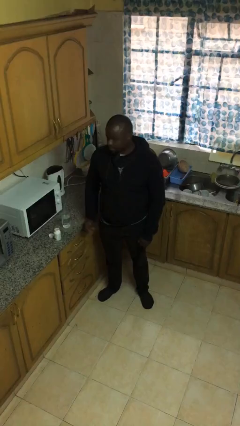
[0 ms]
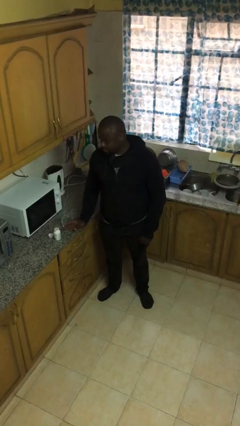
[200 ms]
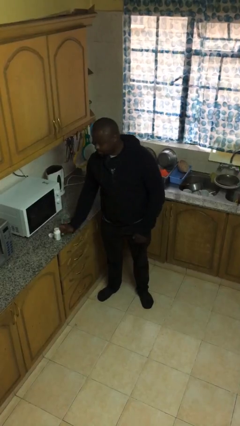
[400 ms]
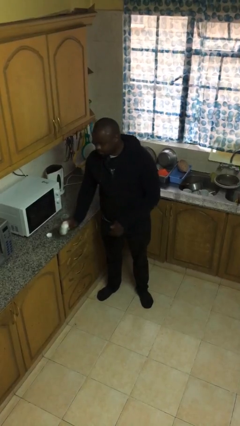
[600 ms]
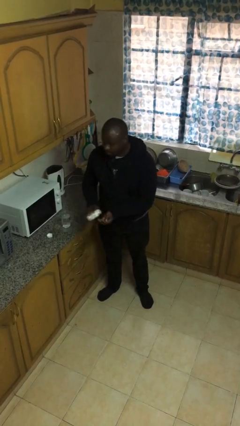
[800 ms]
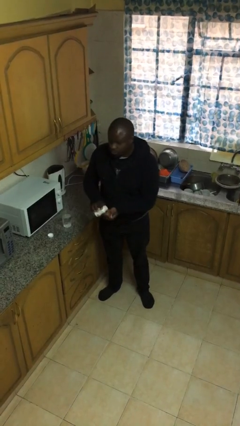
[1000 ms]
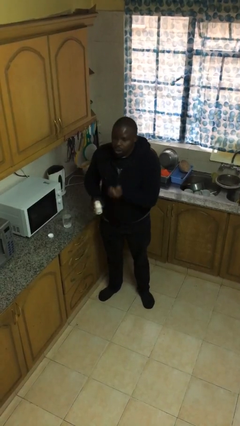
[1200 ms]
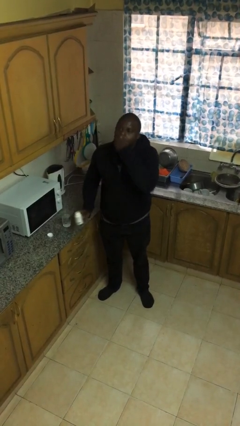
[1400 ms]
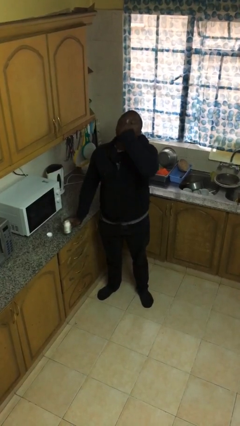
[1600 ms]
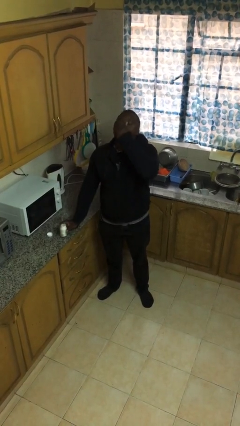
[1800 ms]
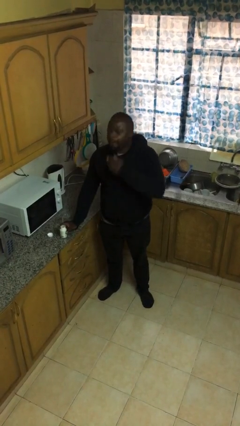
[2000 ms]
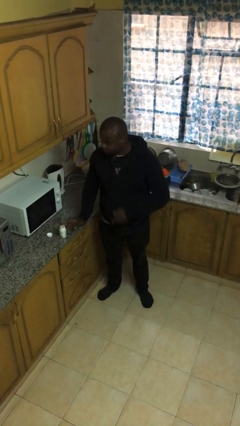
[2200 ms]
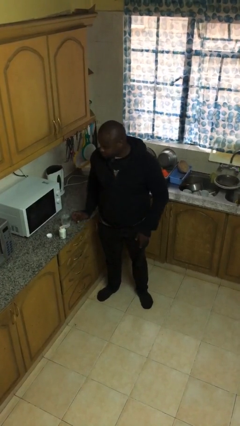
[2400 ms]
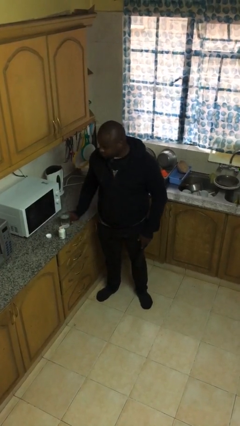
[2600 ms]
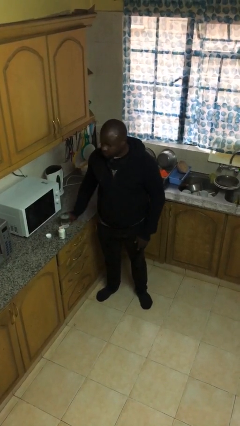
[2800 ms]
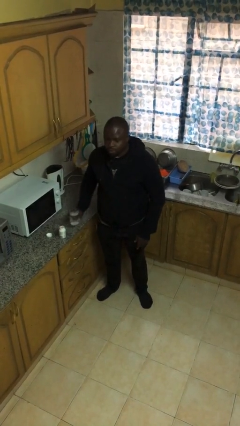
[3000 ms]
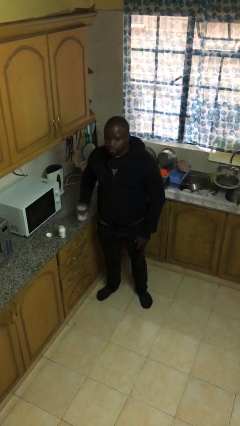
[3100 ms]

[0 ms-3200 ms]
person takes medicine pills

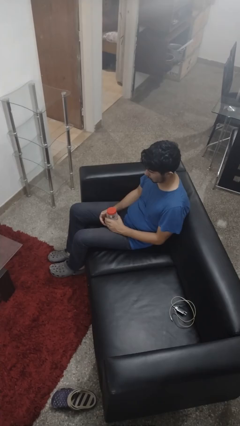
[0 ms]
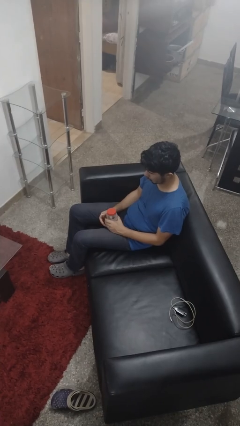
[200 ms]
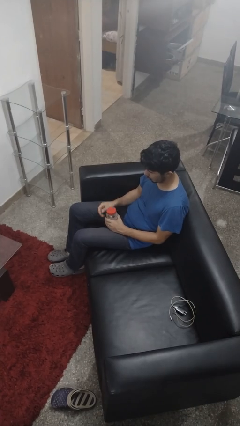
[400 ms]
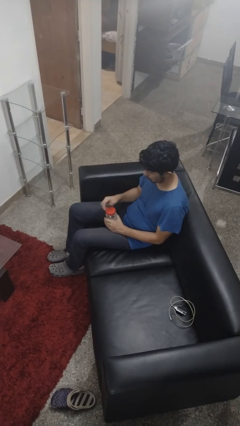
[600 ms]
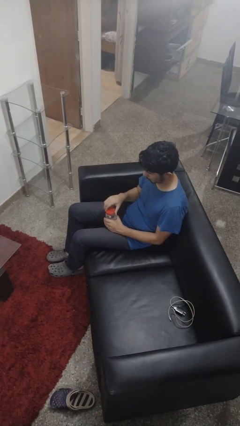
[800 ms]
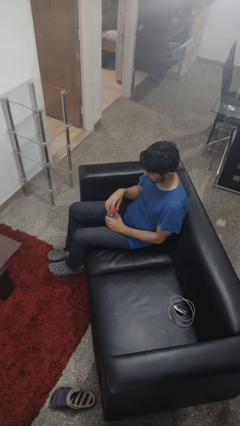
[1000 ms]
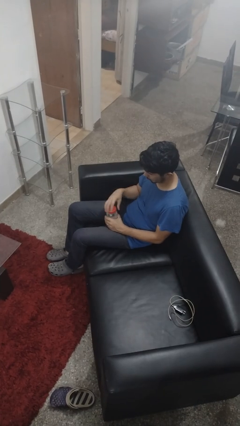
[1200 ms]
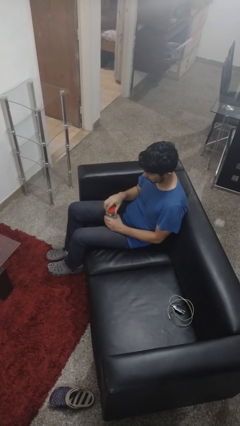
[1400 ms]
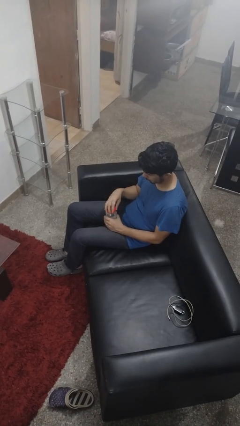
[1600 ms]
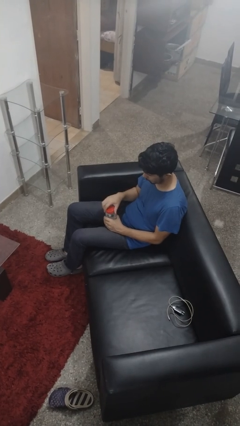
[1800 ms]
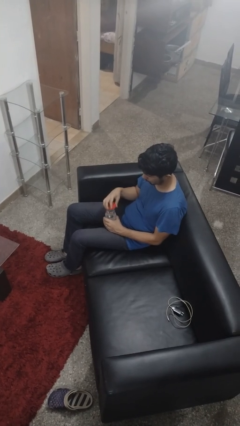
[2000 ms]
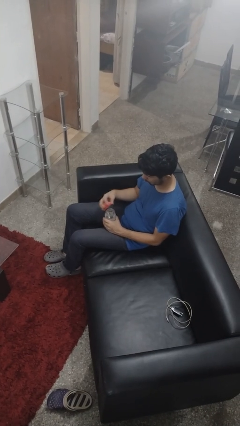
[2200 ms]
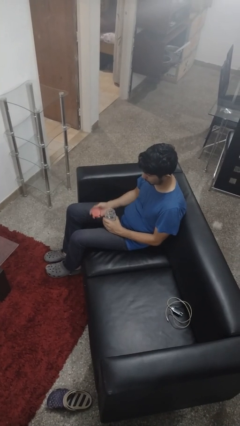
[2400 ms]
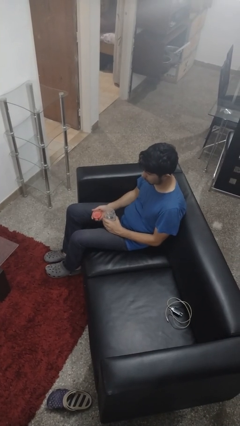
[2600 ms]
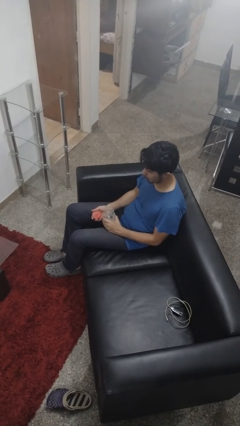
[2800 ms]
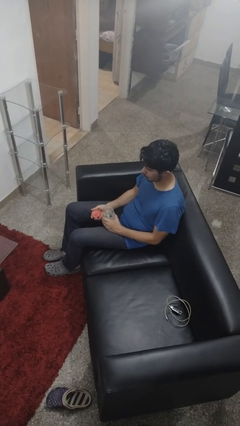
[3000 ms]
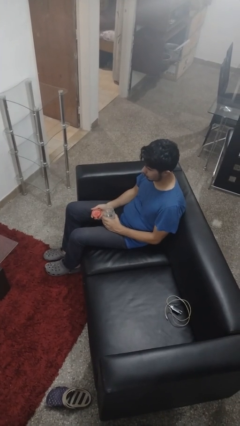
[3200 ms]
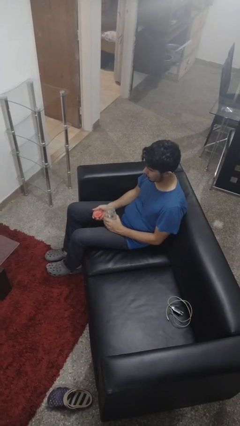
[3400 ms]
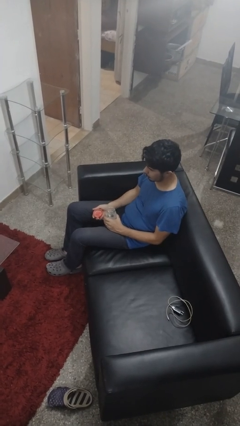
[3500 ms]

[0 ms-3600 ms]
person opens jar

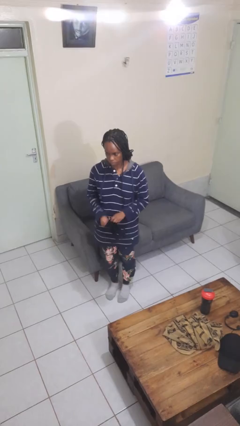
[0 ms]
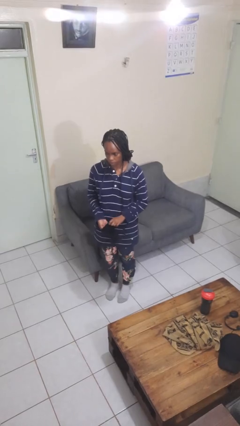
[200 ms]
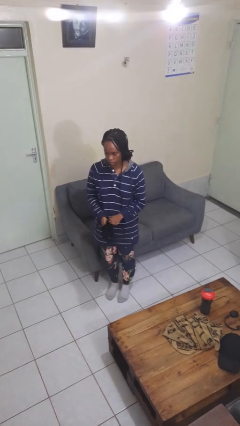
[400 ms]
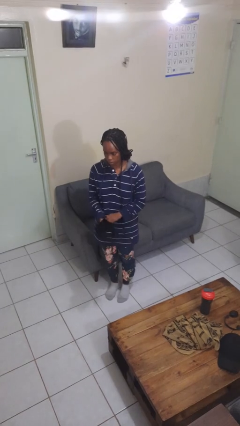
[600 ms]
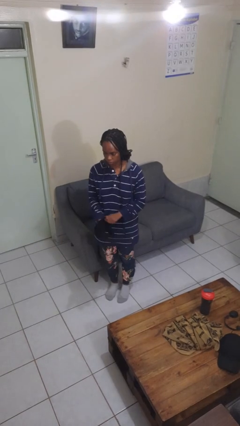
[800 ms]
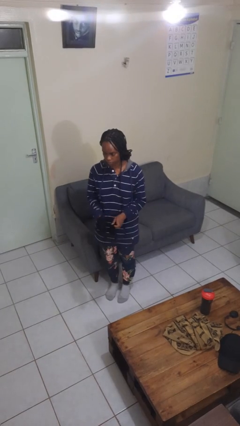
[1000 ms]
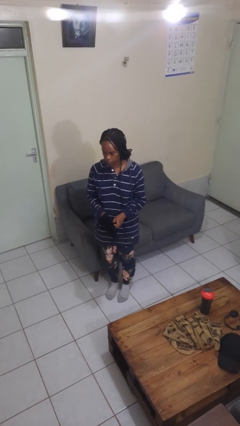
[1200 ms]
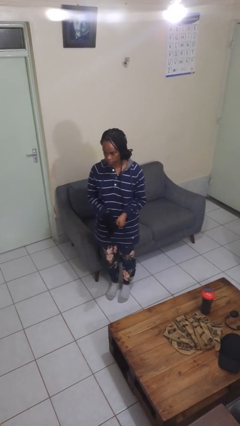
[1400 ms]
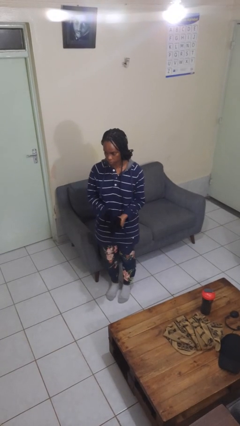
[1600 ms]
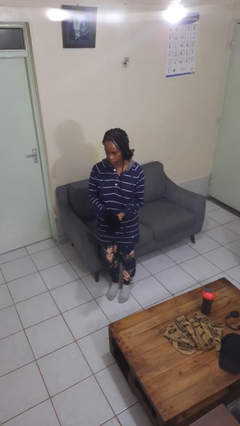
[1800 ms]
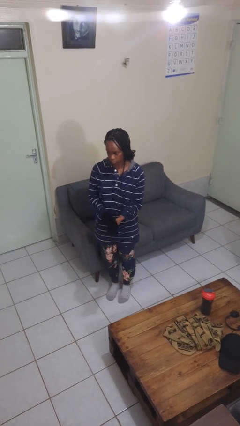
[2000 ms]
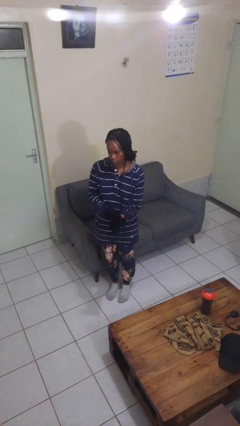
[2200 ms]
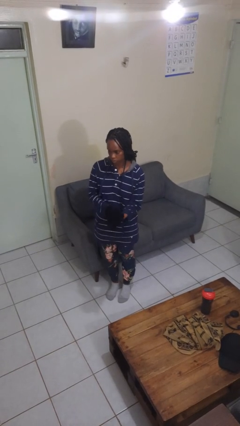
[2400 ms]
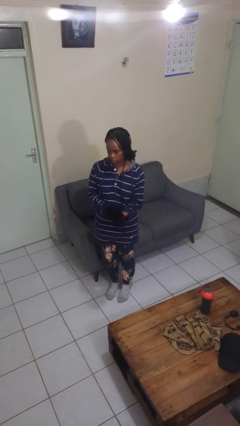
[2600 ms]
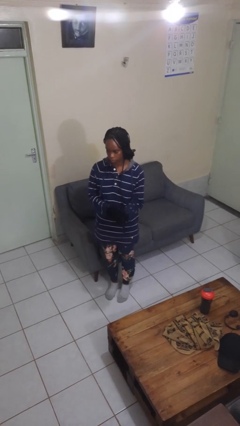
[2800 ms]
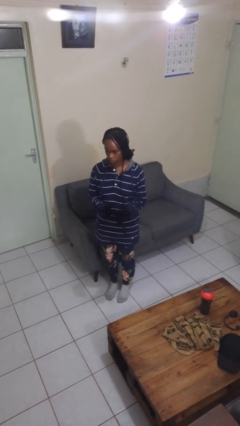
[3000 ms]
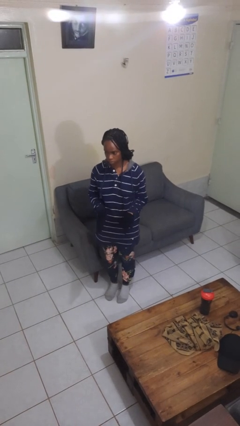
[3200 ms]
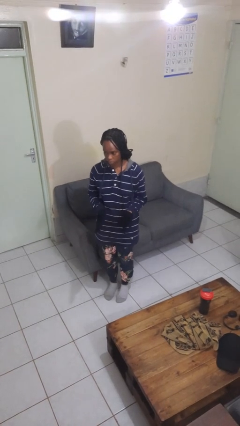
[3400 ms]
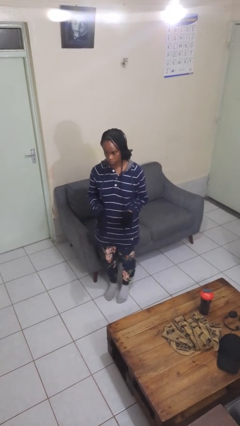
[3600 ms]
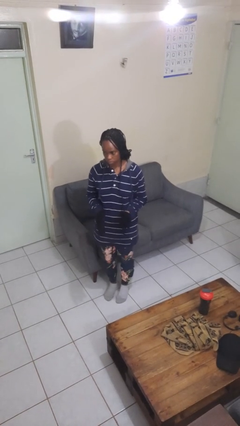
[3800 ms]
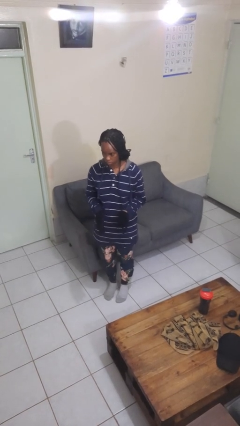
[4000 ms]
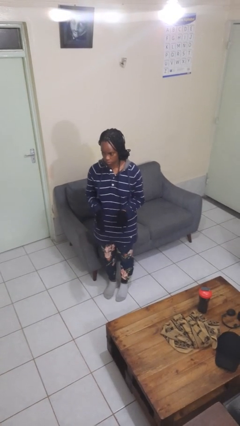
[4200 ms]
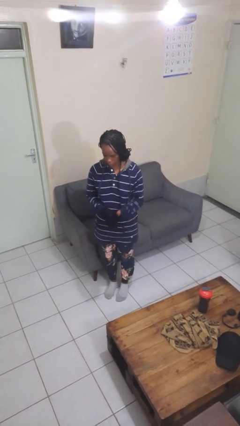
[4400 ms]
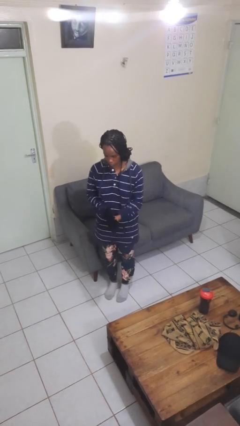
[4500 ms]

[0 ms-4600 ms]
person puts on gloves

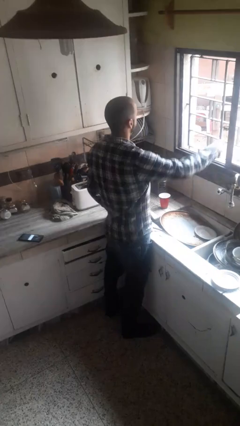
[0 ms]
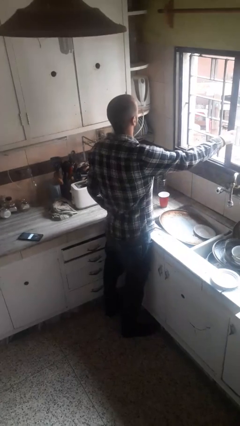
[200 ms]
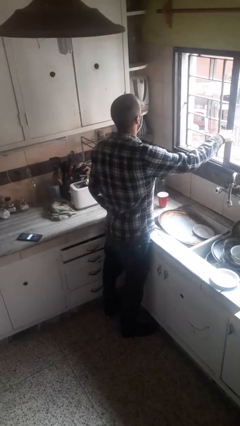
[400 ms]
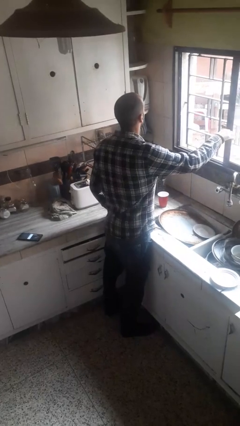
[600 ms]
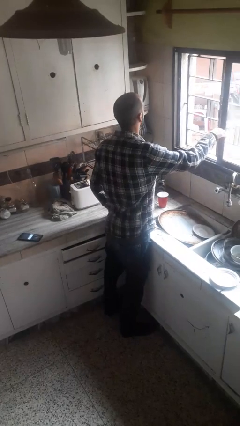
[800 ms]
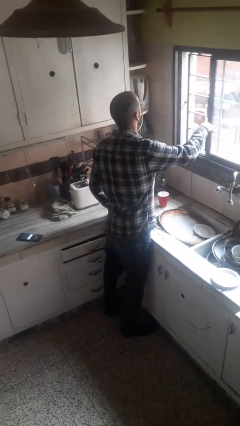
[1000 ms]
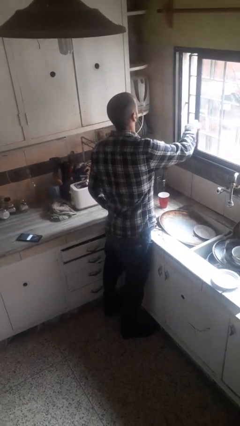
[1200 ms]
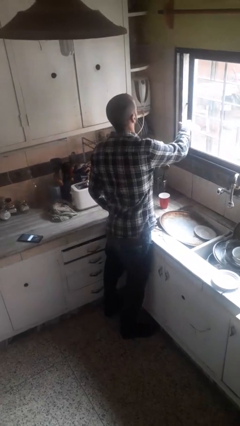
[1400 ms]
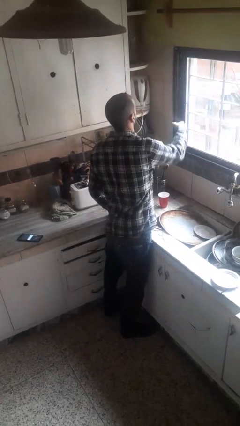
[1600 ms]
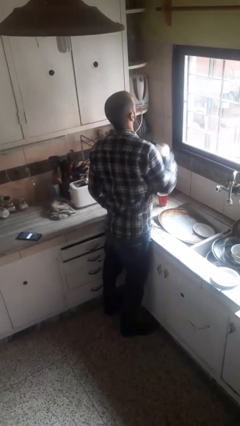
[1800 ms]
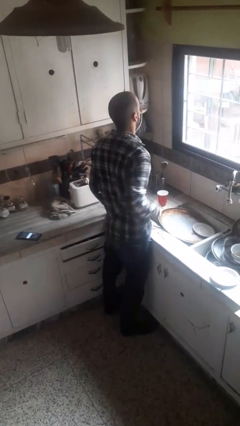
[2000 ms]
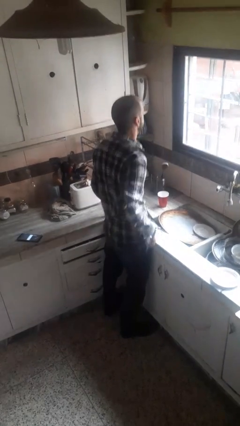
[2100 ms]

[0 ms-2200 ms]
person closes home window

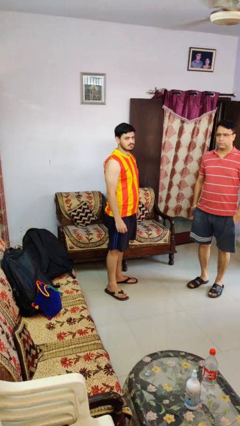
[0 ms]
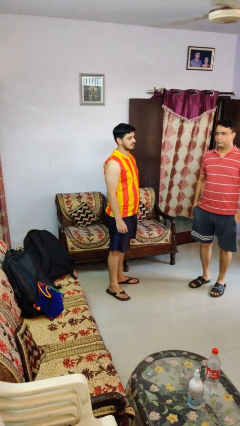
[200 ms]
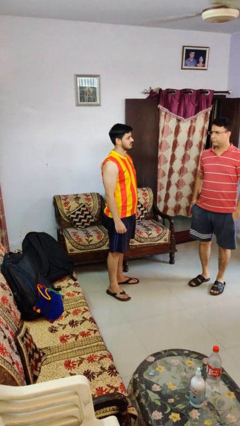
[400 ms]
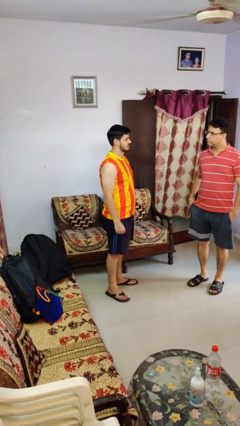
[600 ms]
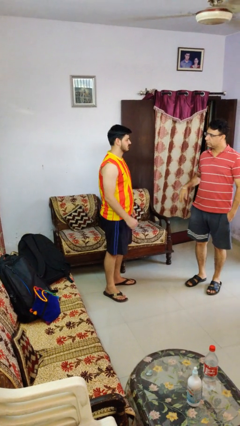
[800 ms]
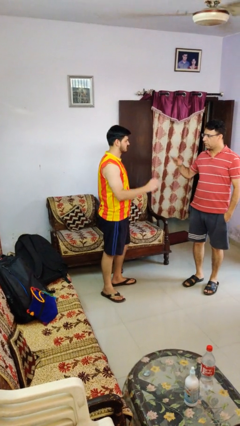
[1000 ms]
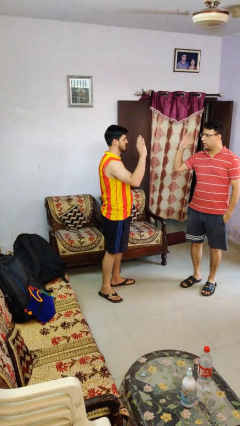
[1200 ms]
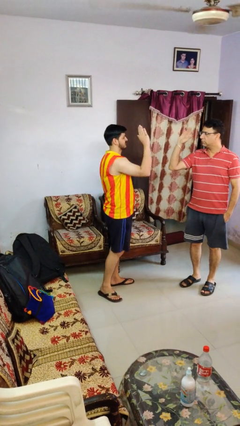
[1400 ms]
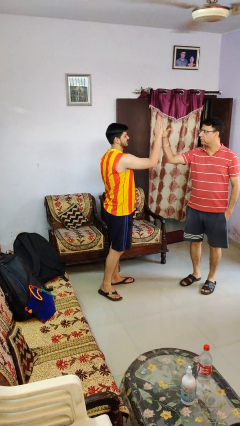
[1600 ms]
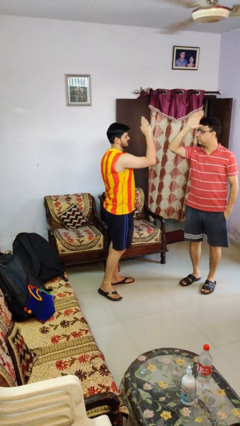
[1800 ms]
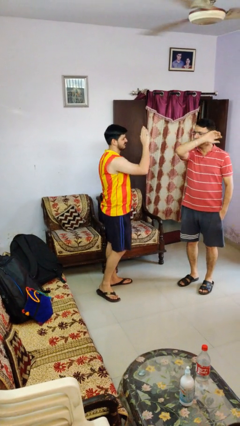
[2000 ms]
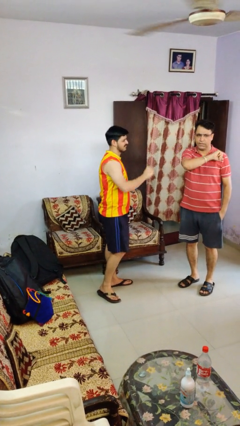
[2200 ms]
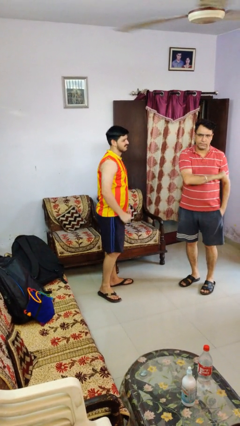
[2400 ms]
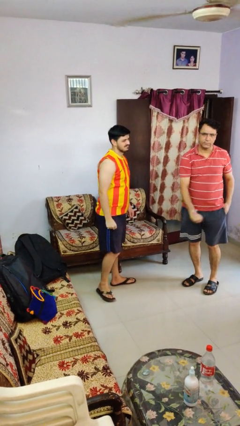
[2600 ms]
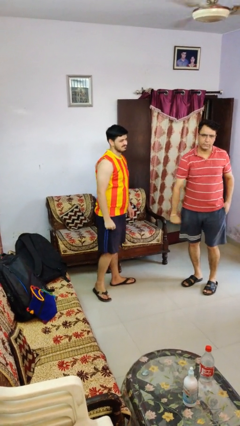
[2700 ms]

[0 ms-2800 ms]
person highfives hand

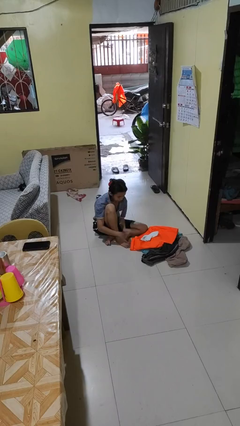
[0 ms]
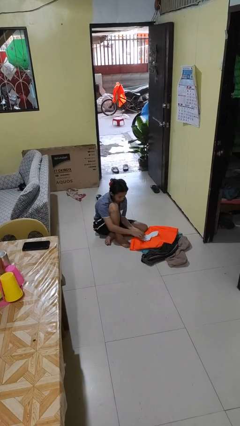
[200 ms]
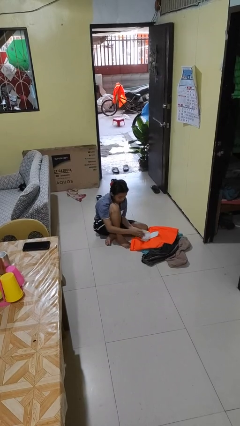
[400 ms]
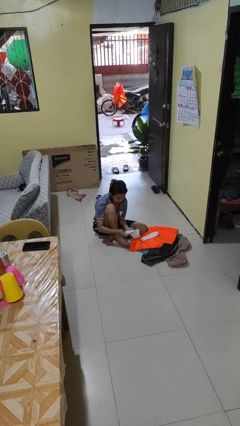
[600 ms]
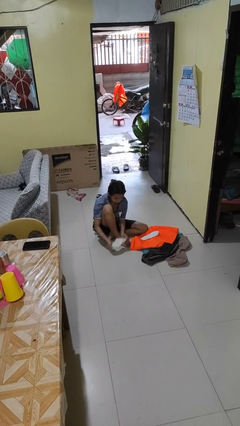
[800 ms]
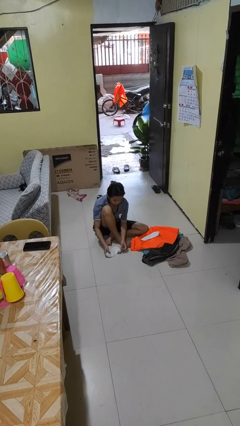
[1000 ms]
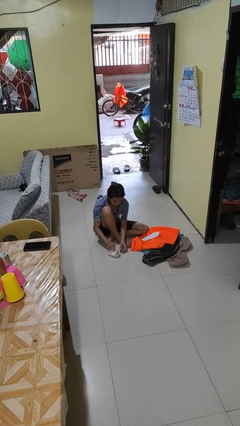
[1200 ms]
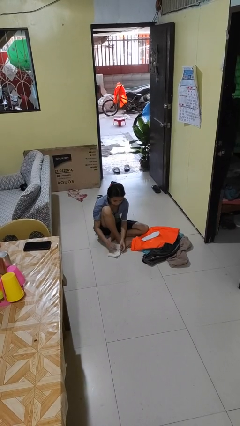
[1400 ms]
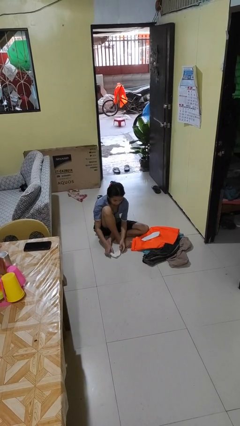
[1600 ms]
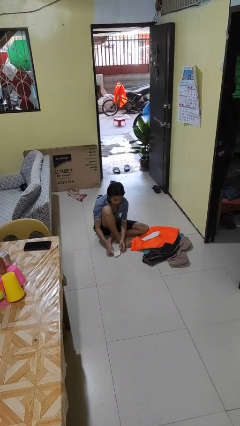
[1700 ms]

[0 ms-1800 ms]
person folds socks
